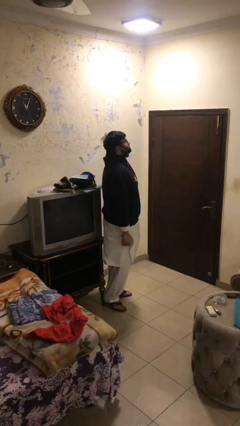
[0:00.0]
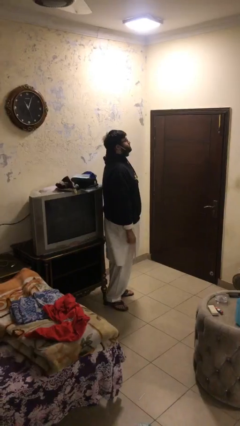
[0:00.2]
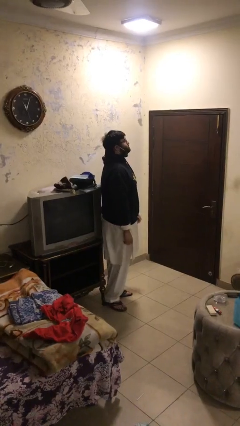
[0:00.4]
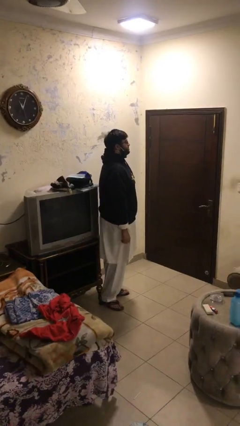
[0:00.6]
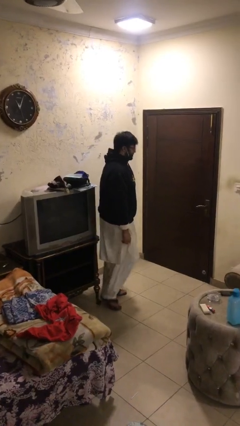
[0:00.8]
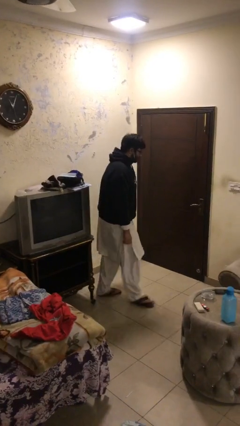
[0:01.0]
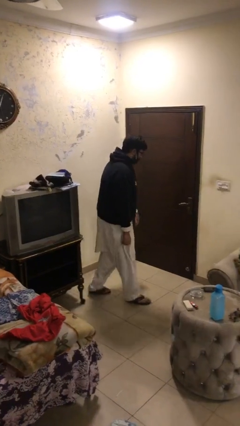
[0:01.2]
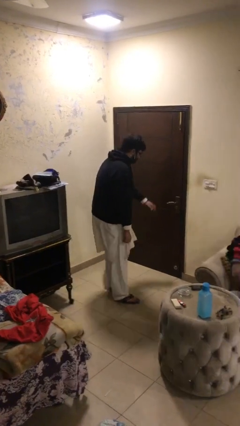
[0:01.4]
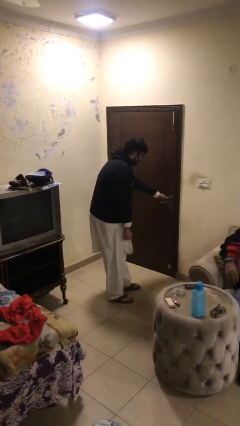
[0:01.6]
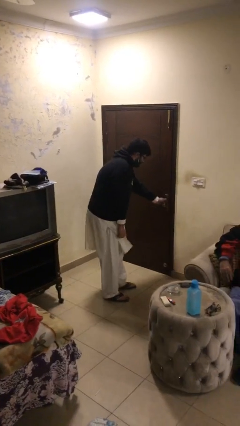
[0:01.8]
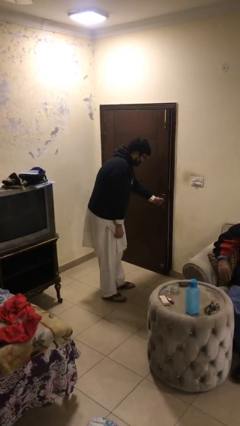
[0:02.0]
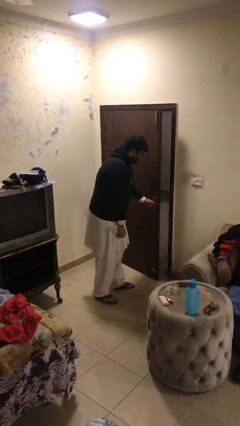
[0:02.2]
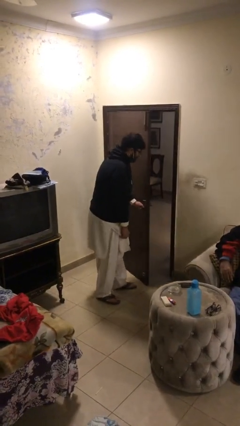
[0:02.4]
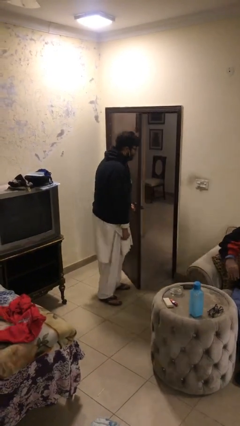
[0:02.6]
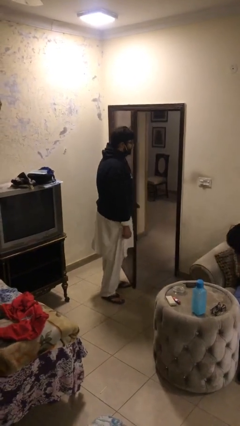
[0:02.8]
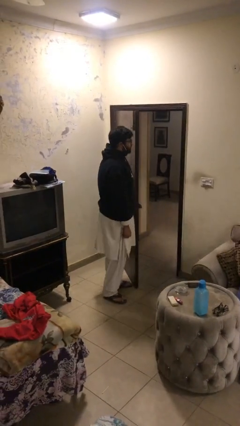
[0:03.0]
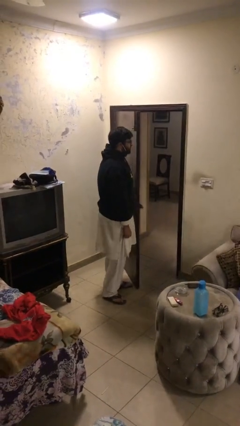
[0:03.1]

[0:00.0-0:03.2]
person opens facility door

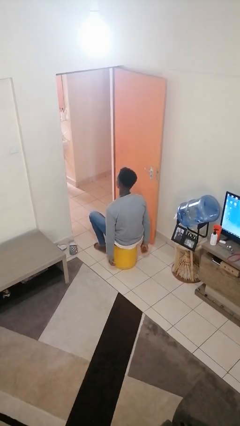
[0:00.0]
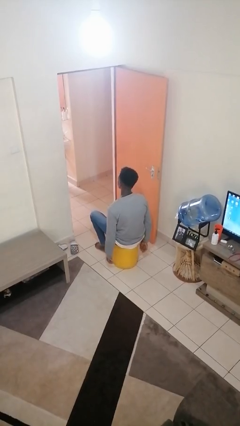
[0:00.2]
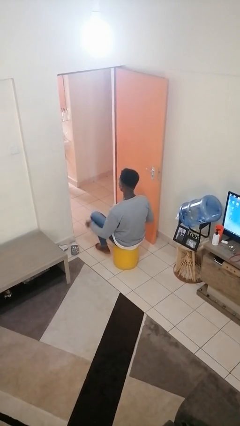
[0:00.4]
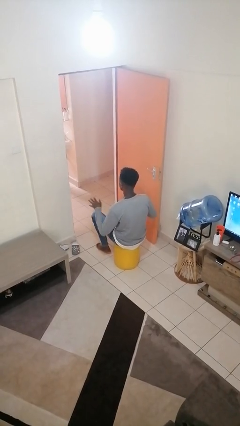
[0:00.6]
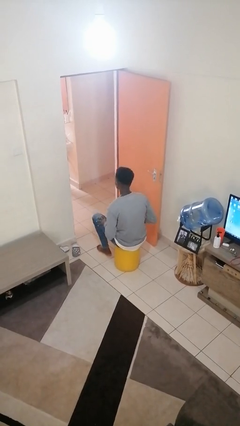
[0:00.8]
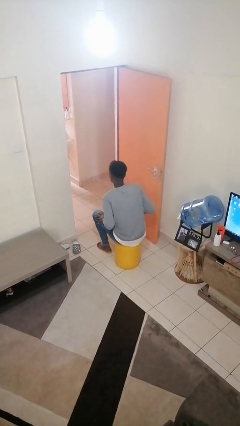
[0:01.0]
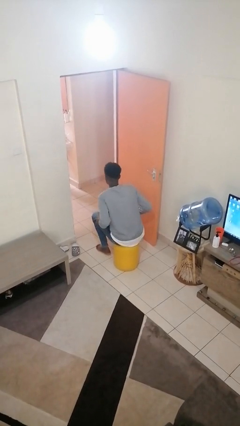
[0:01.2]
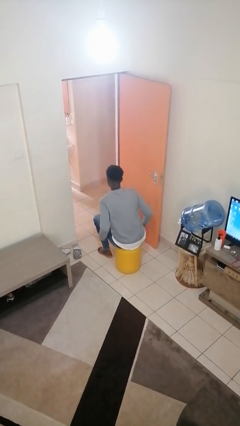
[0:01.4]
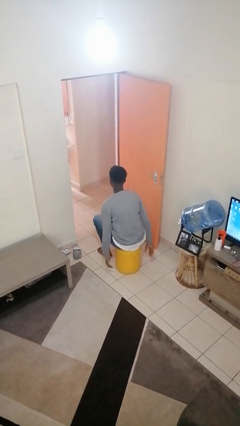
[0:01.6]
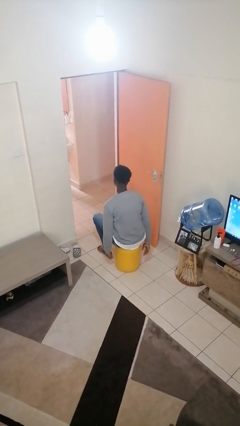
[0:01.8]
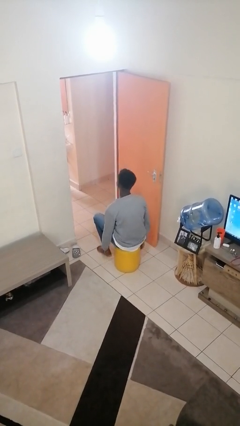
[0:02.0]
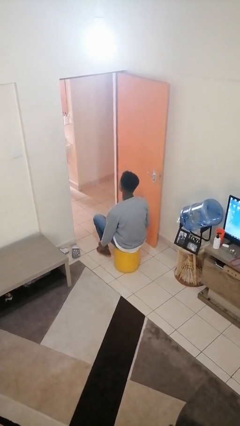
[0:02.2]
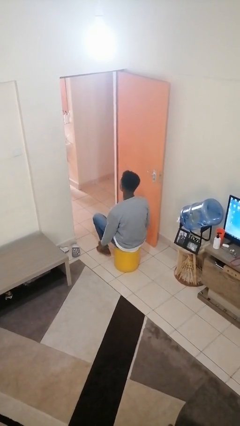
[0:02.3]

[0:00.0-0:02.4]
person slaps hands on thighs

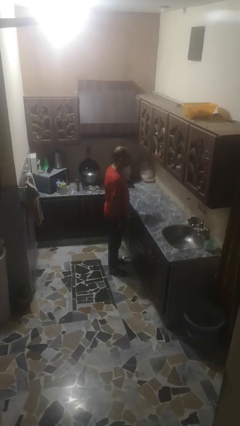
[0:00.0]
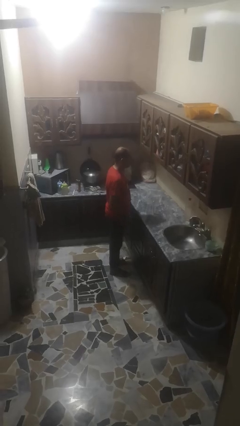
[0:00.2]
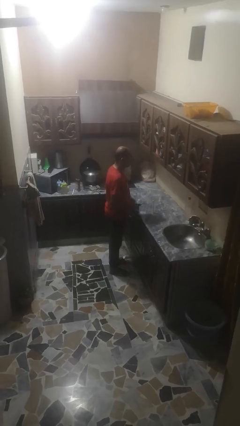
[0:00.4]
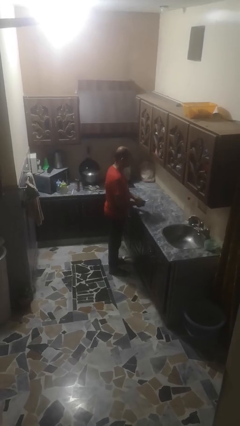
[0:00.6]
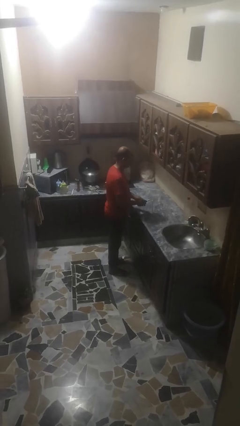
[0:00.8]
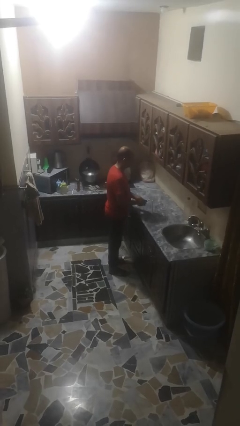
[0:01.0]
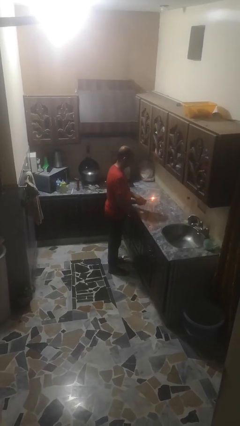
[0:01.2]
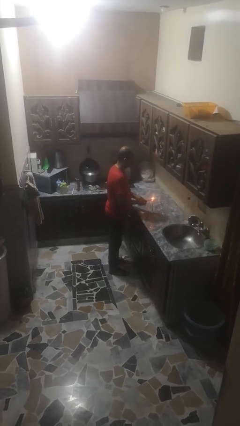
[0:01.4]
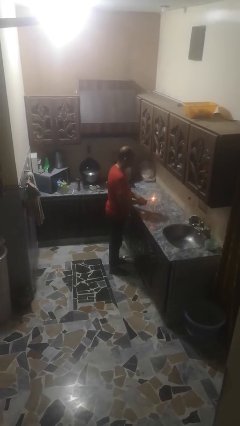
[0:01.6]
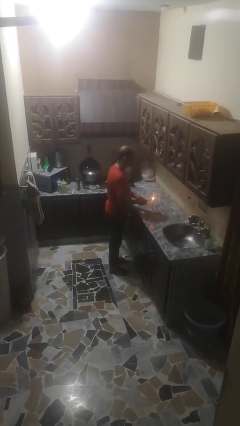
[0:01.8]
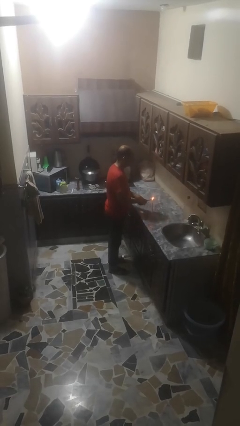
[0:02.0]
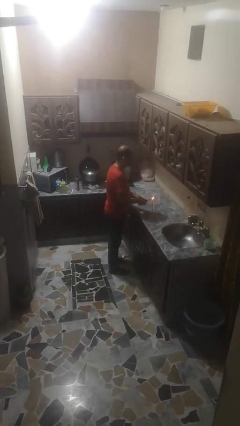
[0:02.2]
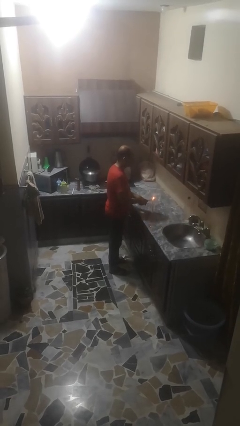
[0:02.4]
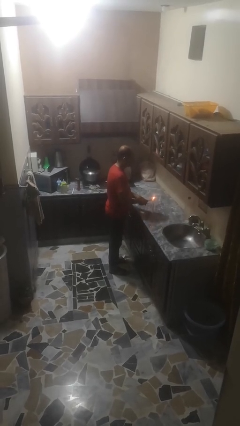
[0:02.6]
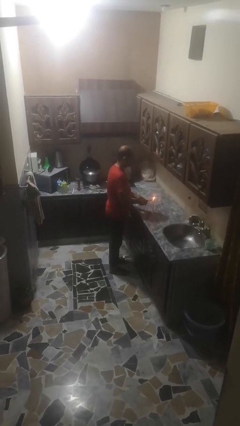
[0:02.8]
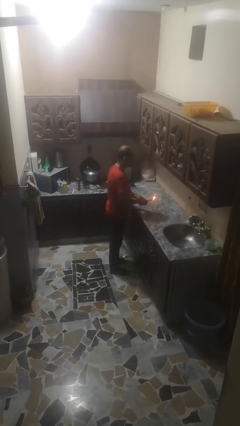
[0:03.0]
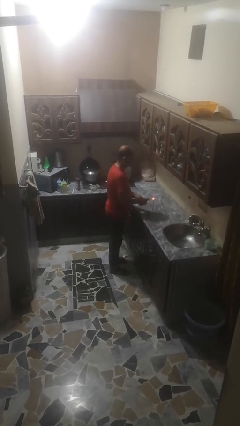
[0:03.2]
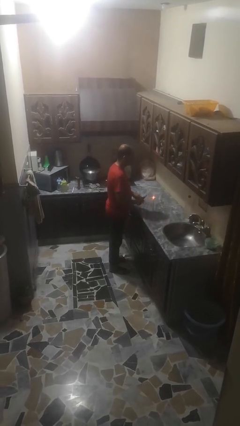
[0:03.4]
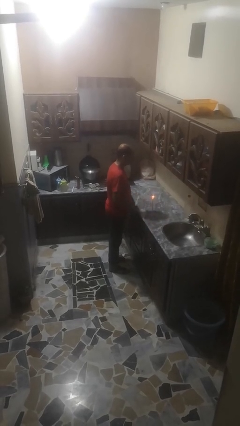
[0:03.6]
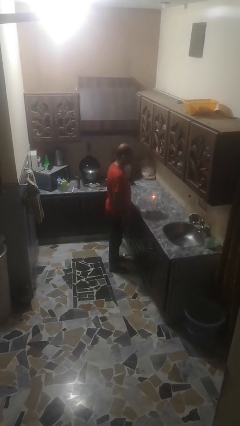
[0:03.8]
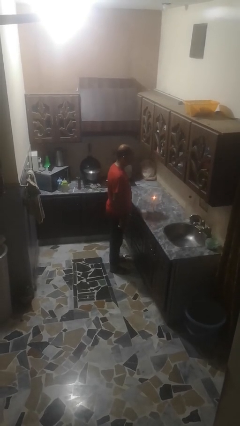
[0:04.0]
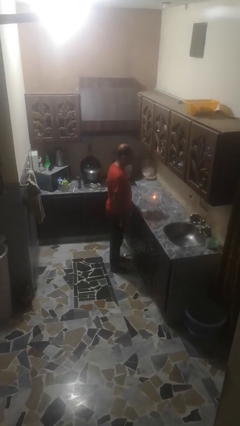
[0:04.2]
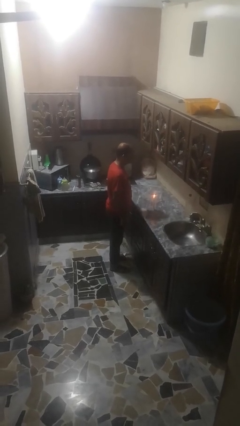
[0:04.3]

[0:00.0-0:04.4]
person lights candle

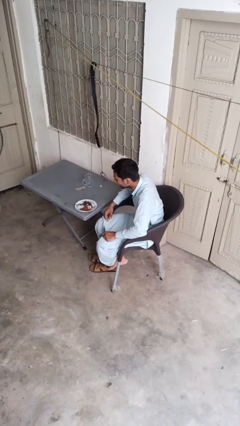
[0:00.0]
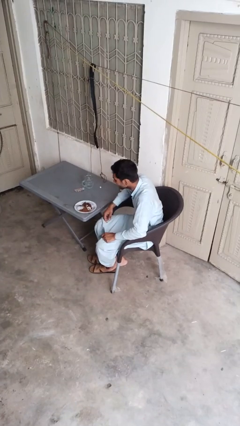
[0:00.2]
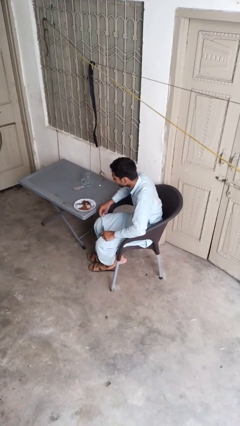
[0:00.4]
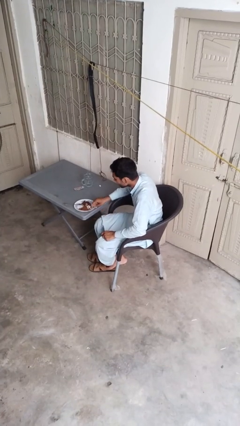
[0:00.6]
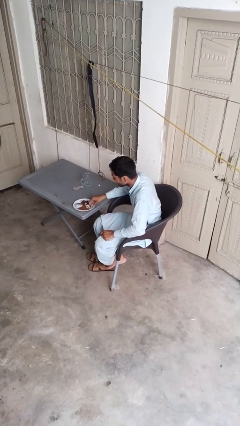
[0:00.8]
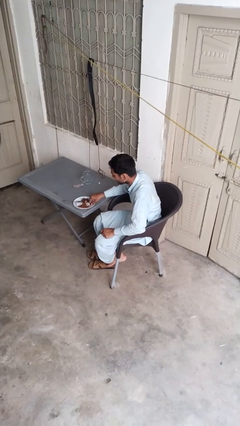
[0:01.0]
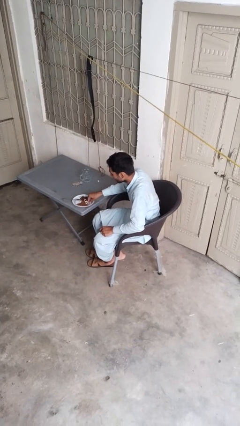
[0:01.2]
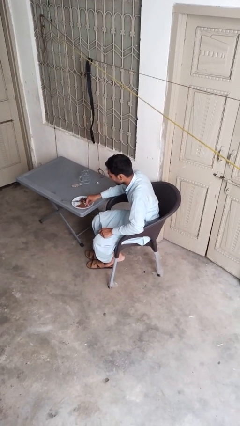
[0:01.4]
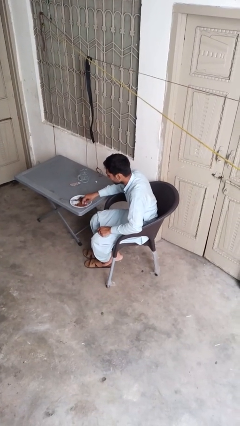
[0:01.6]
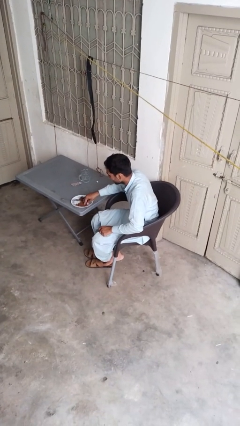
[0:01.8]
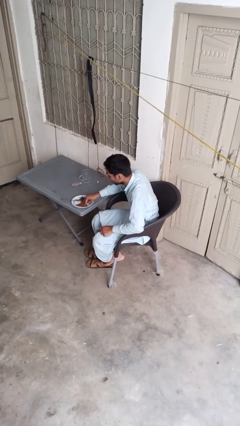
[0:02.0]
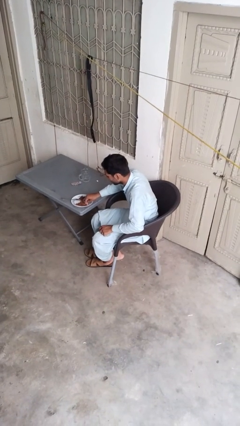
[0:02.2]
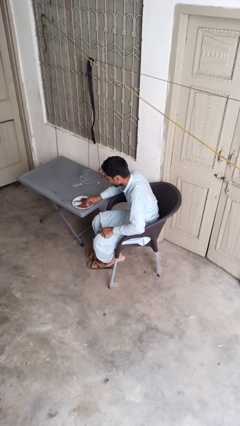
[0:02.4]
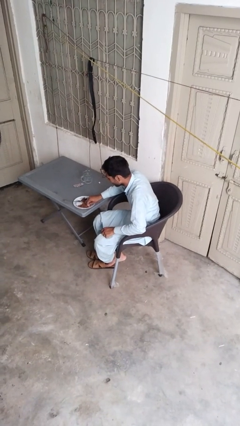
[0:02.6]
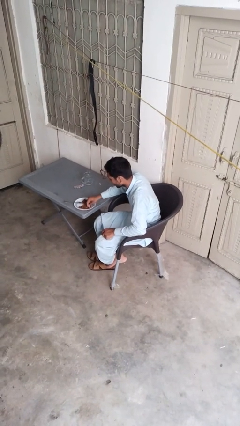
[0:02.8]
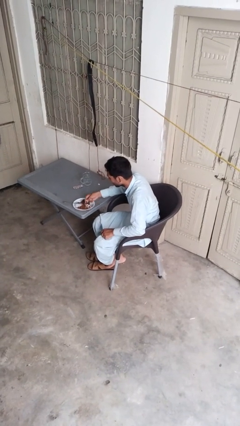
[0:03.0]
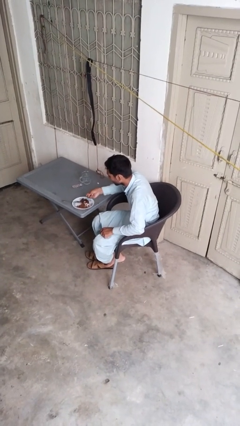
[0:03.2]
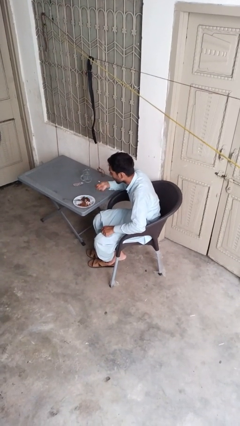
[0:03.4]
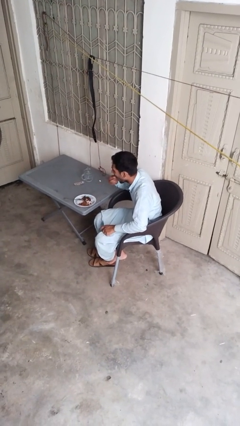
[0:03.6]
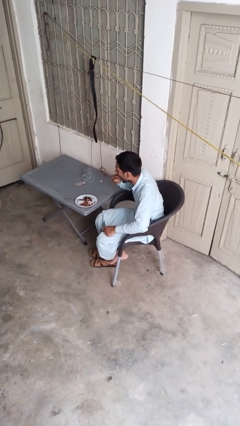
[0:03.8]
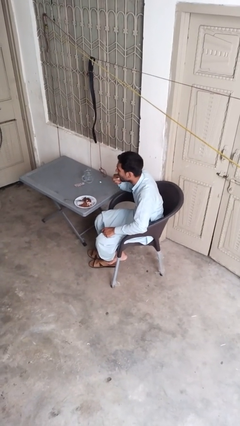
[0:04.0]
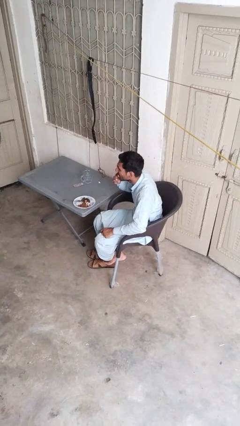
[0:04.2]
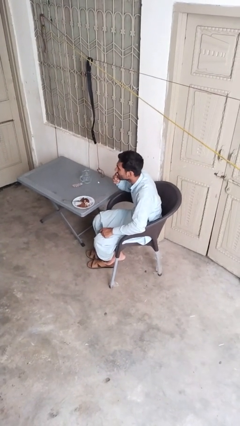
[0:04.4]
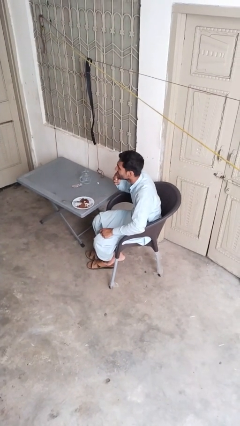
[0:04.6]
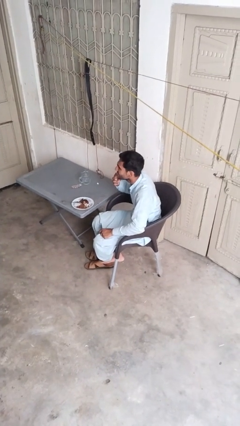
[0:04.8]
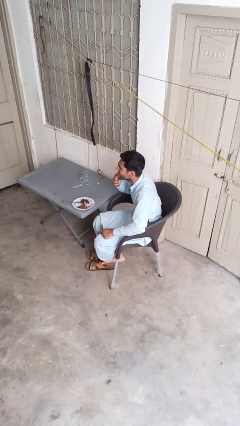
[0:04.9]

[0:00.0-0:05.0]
person eats with hands

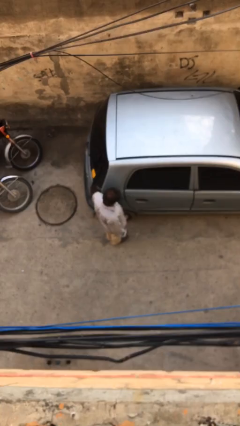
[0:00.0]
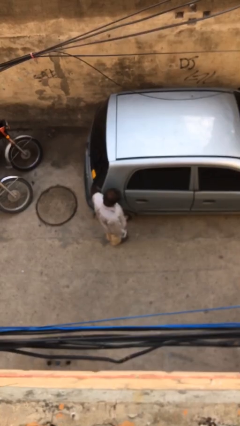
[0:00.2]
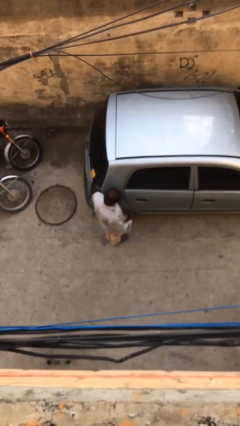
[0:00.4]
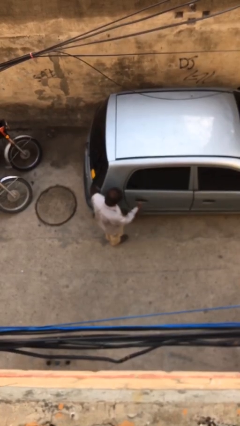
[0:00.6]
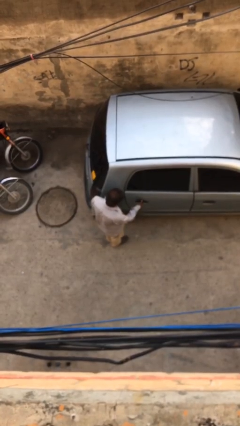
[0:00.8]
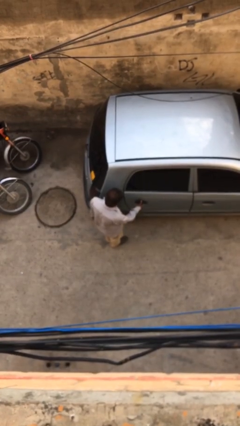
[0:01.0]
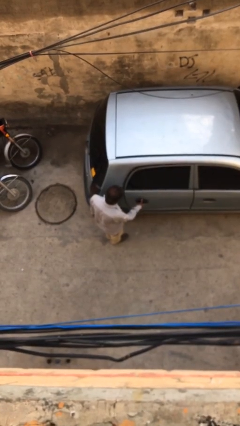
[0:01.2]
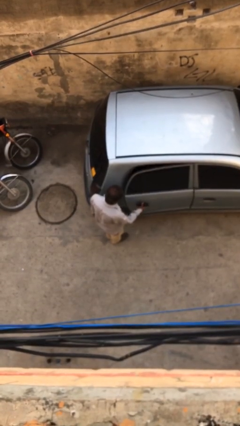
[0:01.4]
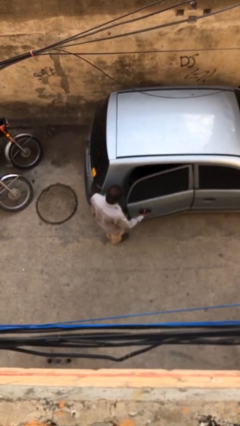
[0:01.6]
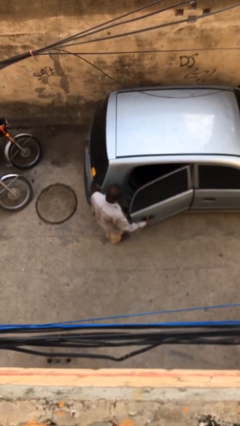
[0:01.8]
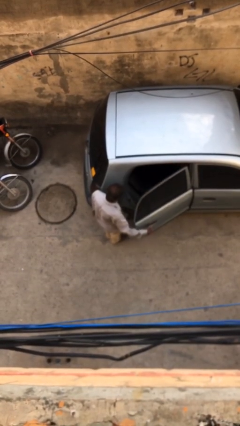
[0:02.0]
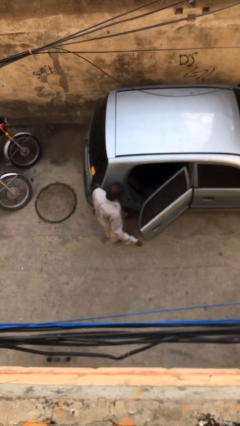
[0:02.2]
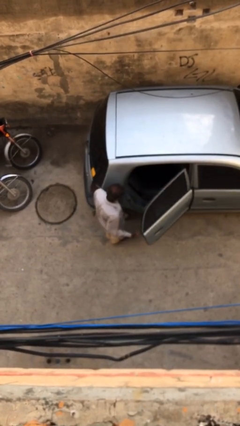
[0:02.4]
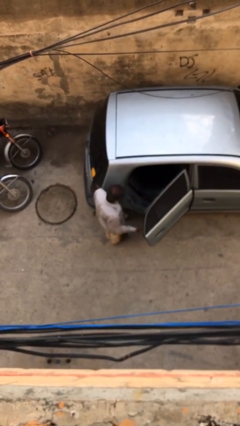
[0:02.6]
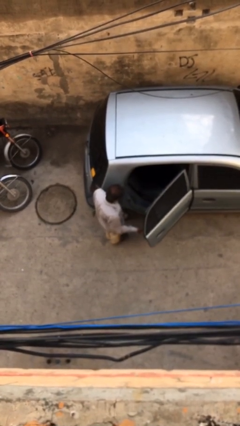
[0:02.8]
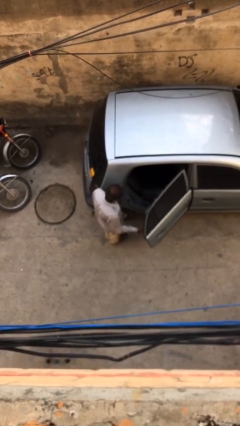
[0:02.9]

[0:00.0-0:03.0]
person opens car door
